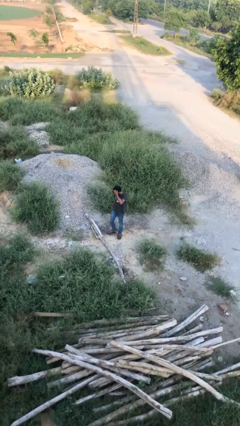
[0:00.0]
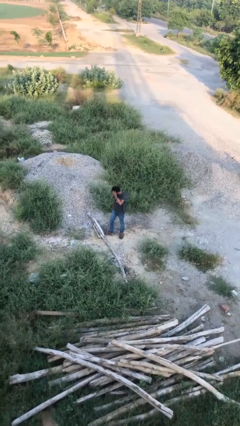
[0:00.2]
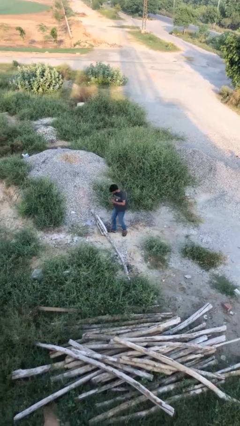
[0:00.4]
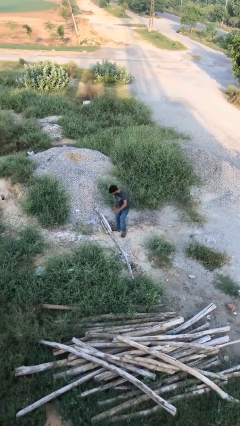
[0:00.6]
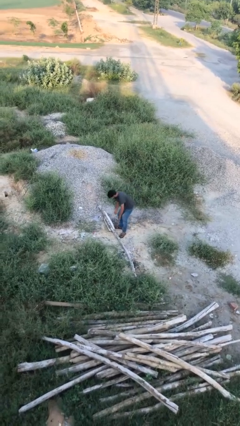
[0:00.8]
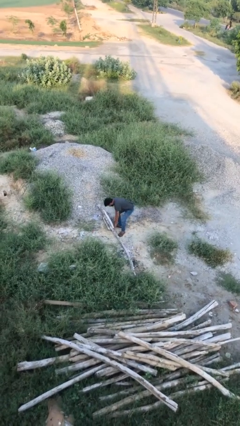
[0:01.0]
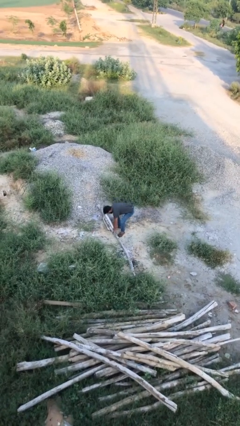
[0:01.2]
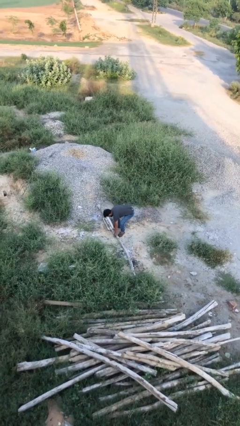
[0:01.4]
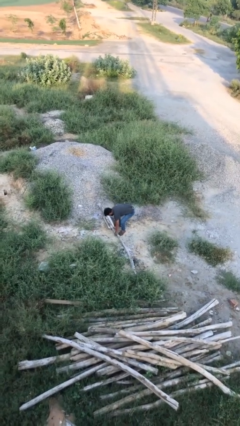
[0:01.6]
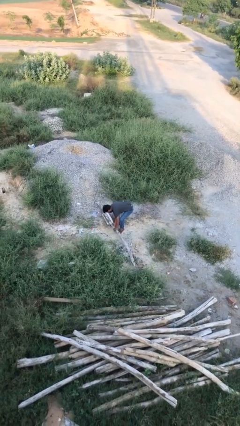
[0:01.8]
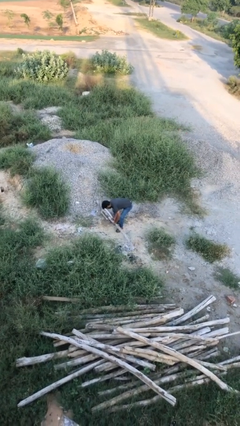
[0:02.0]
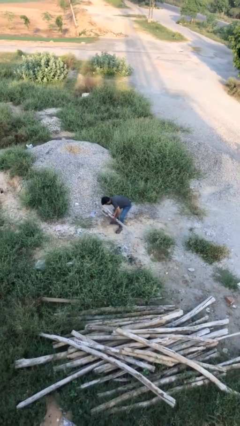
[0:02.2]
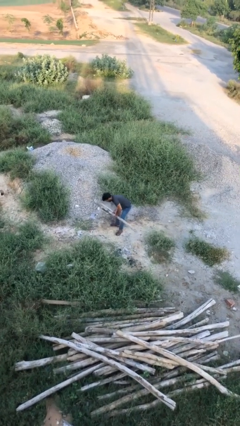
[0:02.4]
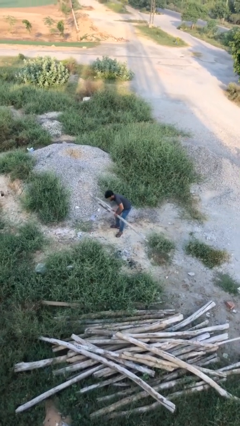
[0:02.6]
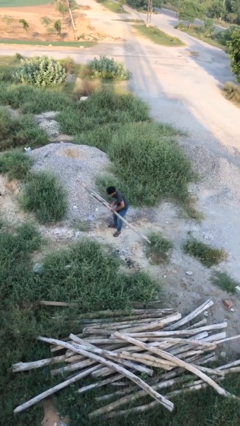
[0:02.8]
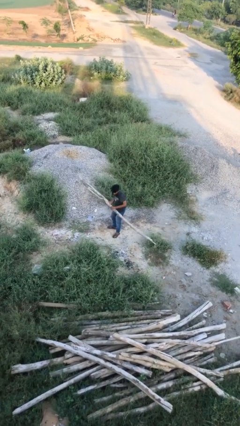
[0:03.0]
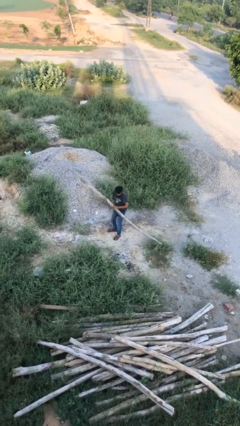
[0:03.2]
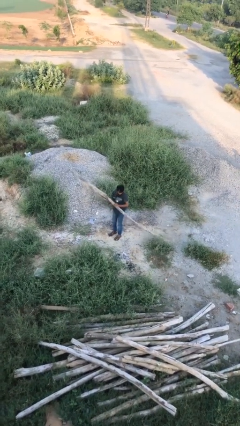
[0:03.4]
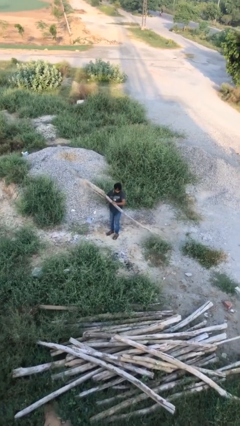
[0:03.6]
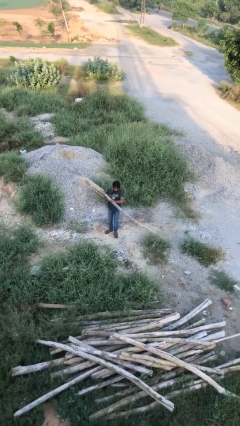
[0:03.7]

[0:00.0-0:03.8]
person picks up object from floor

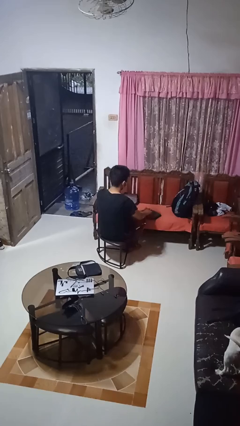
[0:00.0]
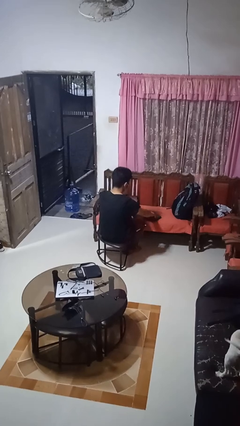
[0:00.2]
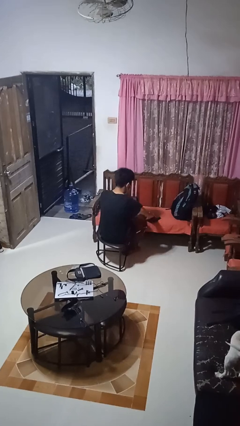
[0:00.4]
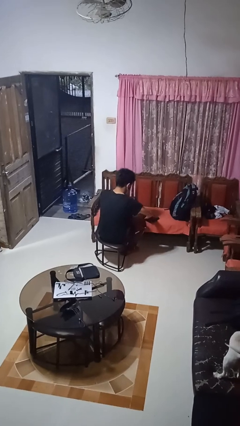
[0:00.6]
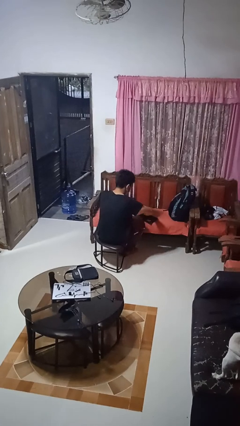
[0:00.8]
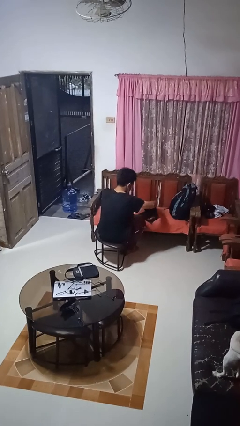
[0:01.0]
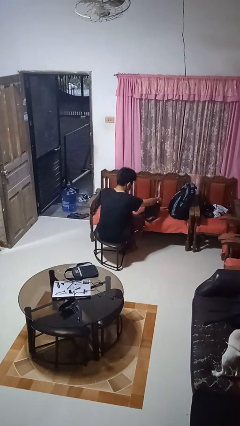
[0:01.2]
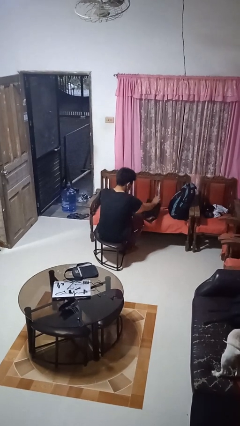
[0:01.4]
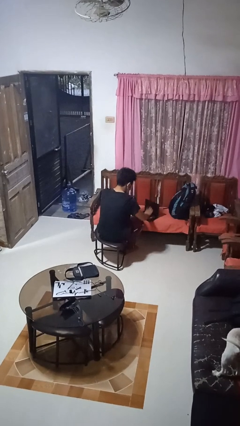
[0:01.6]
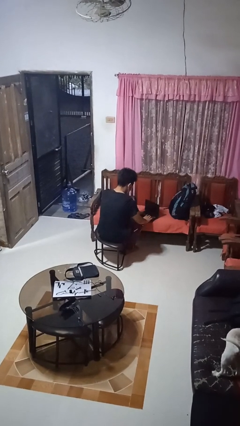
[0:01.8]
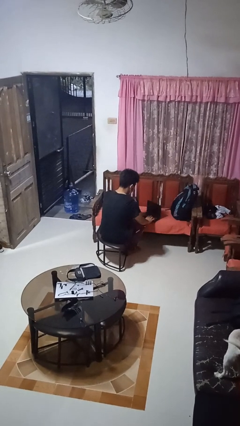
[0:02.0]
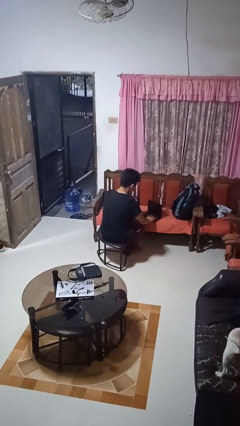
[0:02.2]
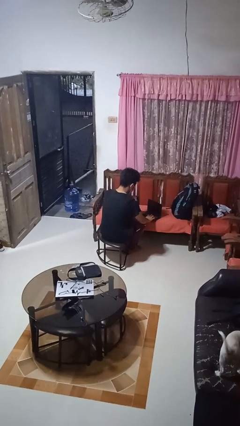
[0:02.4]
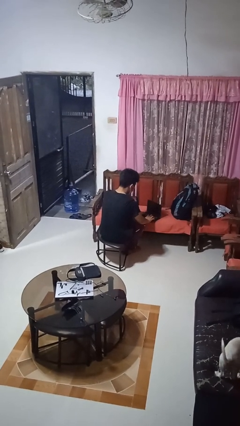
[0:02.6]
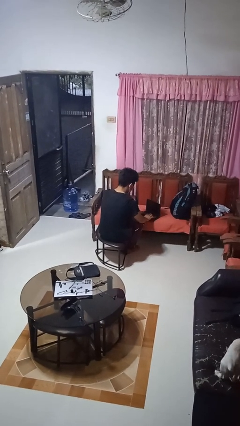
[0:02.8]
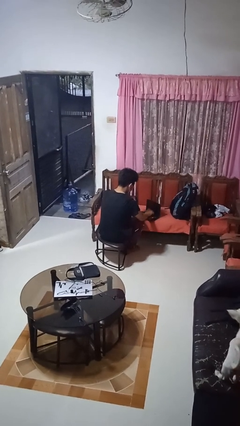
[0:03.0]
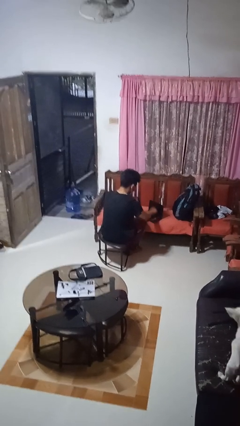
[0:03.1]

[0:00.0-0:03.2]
person opens laptop

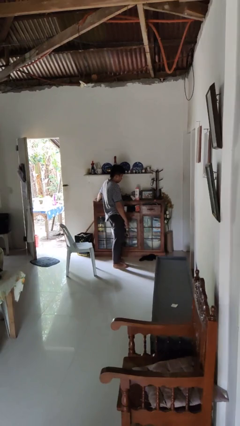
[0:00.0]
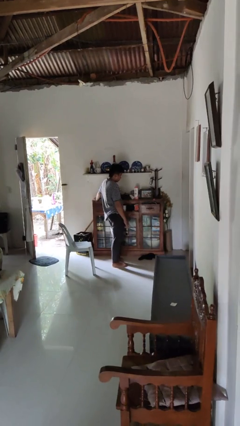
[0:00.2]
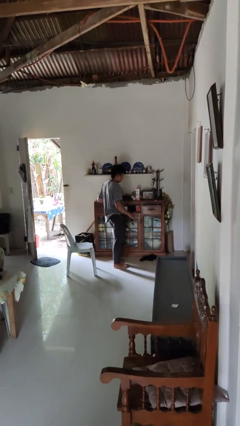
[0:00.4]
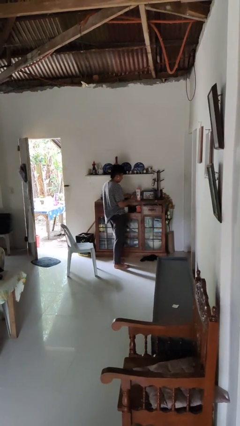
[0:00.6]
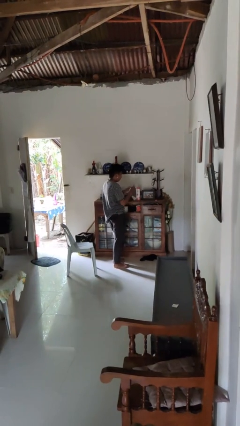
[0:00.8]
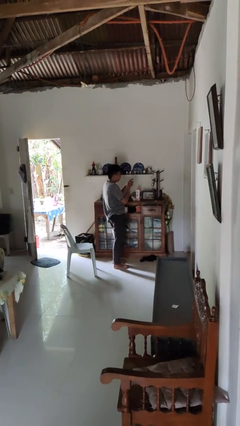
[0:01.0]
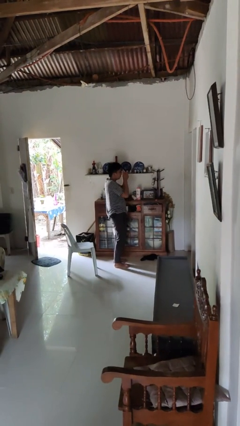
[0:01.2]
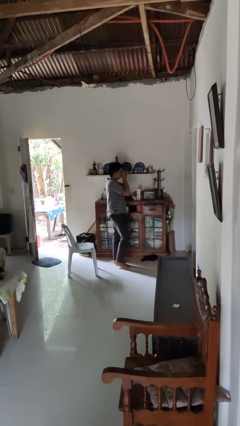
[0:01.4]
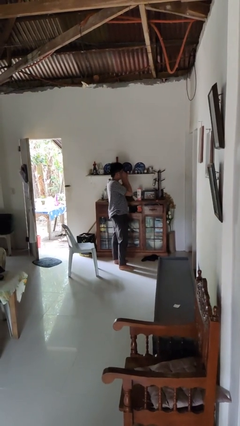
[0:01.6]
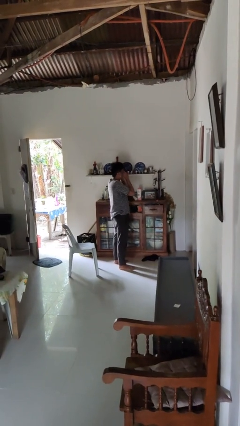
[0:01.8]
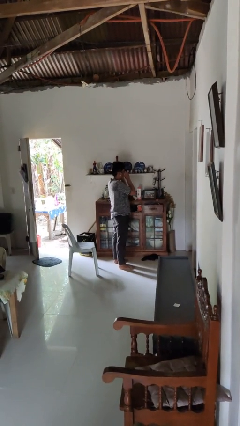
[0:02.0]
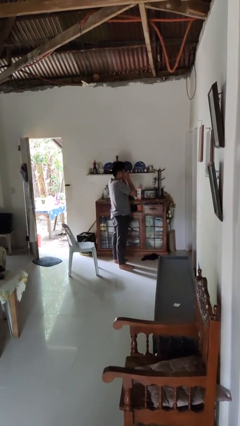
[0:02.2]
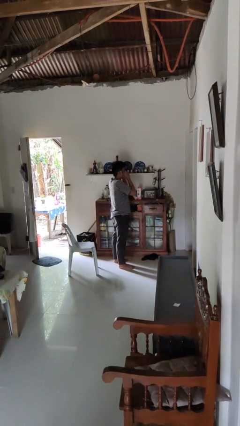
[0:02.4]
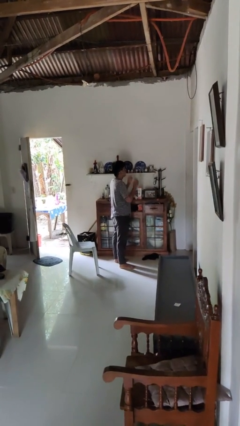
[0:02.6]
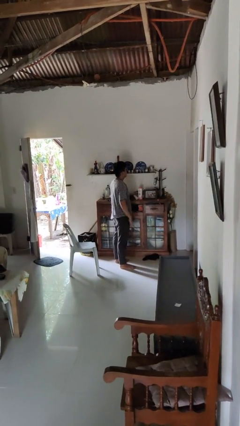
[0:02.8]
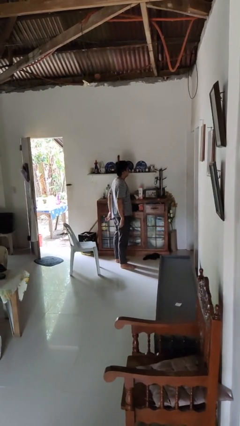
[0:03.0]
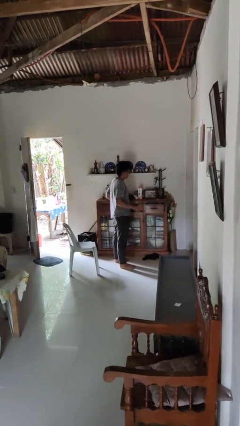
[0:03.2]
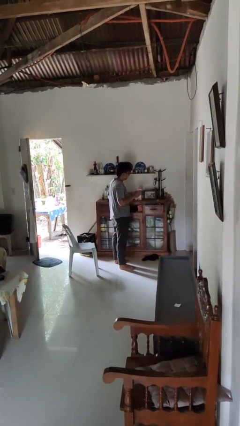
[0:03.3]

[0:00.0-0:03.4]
person puts on sunglasses

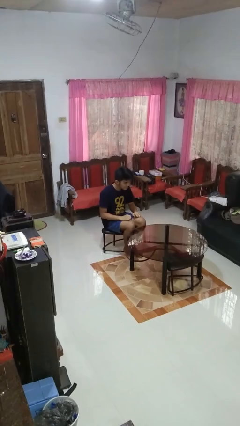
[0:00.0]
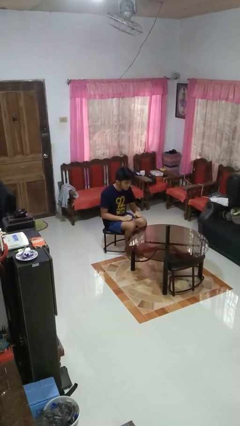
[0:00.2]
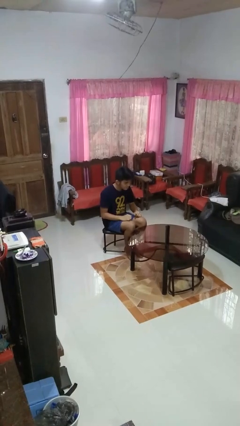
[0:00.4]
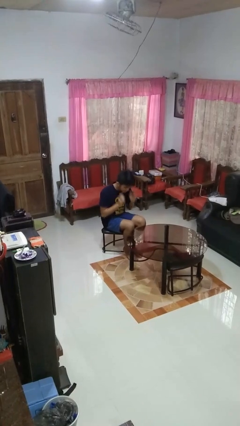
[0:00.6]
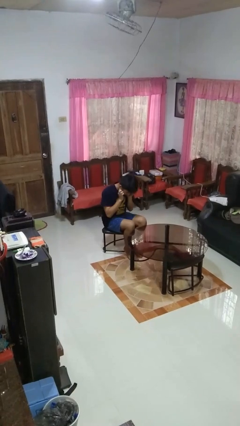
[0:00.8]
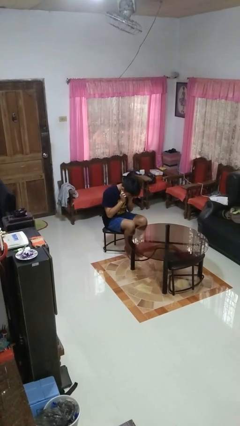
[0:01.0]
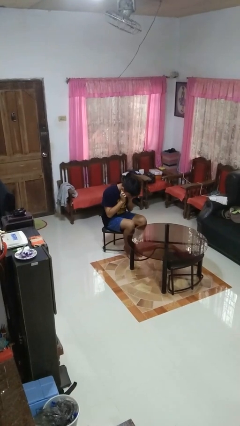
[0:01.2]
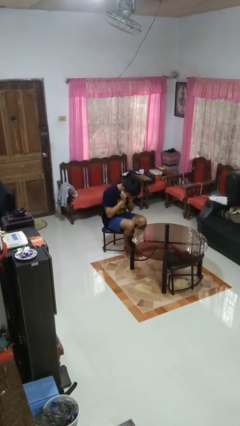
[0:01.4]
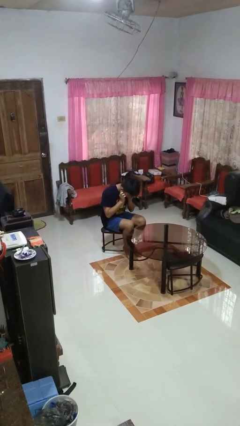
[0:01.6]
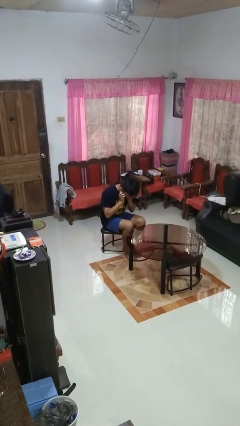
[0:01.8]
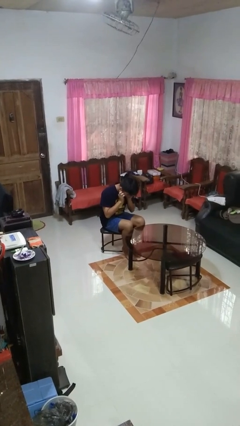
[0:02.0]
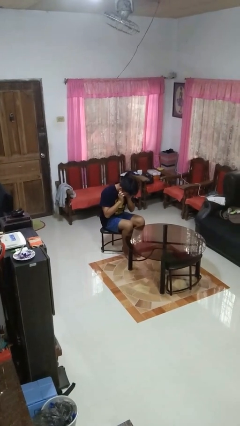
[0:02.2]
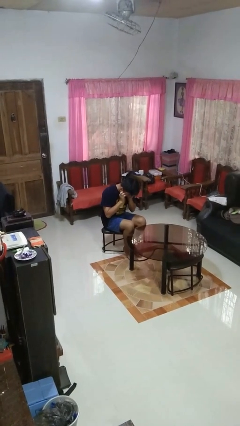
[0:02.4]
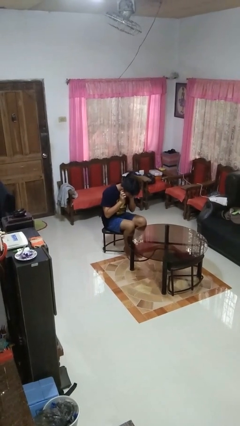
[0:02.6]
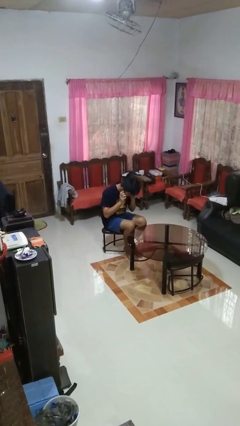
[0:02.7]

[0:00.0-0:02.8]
person puts fingers in ear

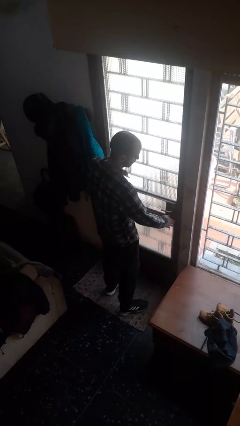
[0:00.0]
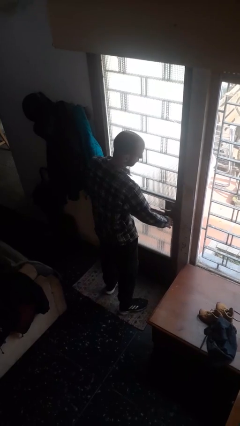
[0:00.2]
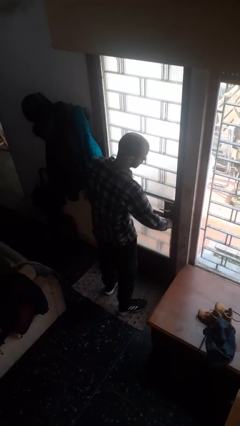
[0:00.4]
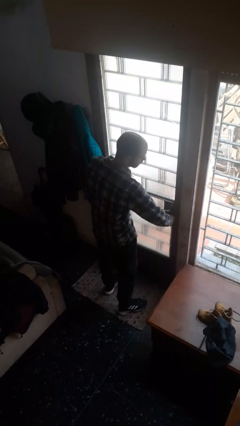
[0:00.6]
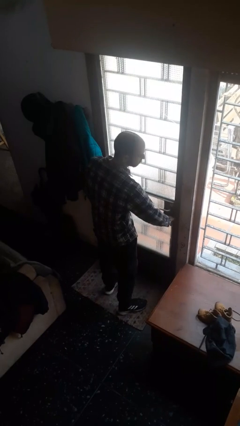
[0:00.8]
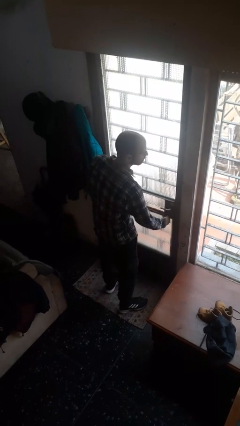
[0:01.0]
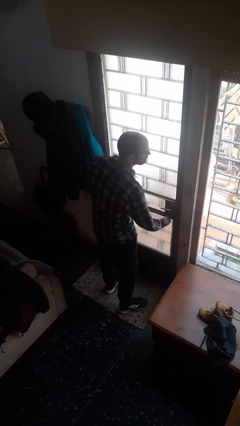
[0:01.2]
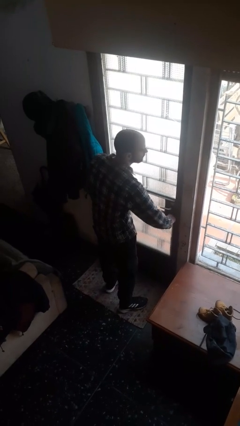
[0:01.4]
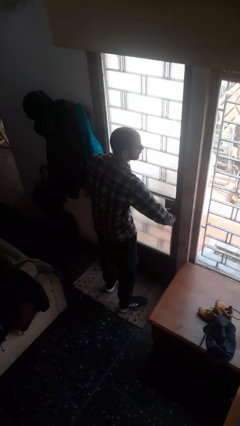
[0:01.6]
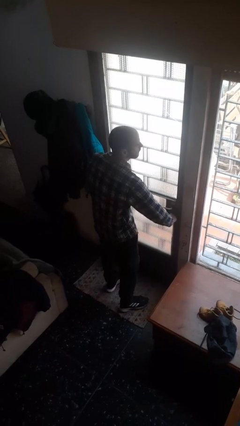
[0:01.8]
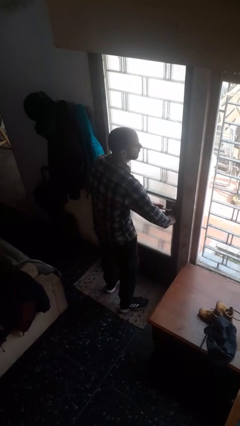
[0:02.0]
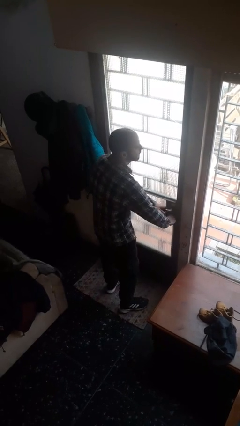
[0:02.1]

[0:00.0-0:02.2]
person unlocks door with keys

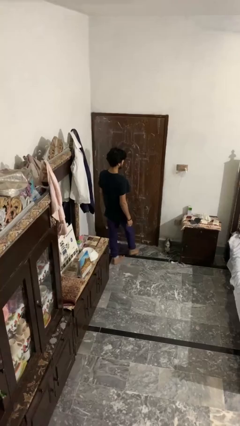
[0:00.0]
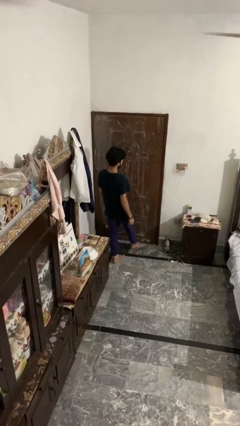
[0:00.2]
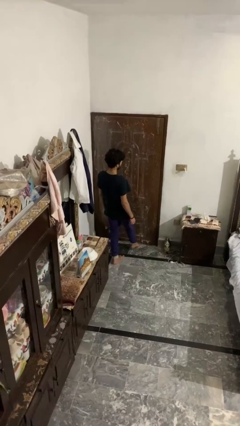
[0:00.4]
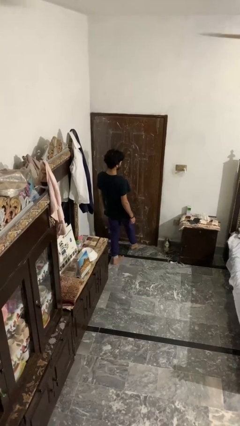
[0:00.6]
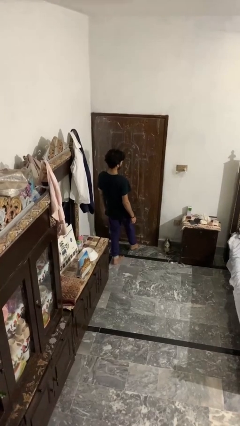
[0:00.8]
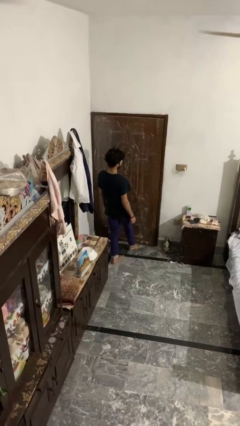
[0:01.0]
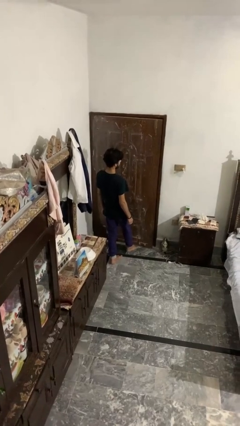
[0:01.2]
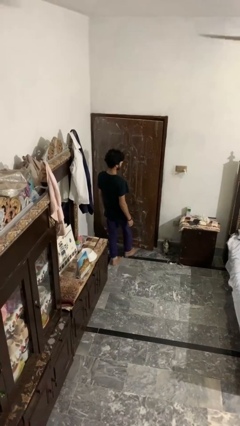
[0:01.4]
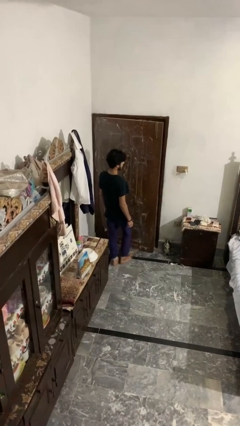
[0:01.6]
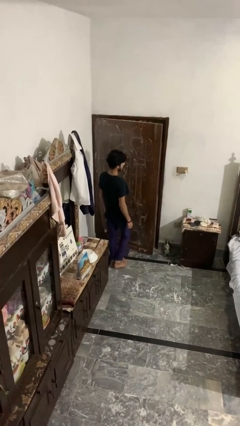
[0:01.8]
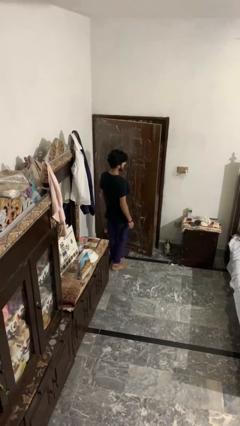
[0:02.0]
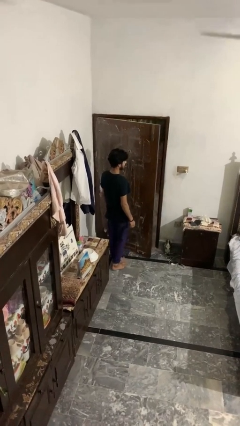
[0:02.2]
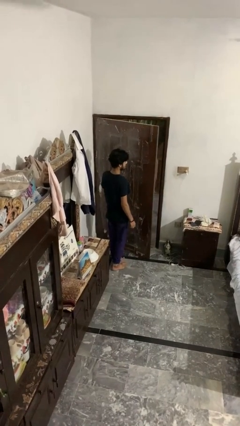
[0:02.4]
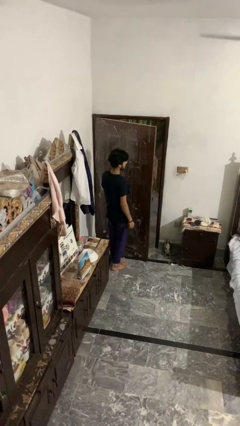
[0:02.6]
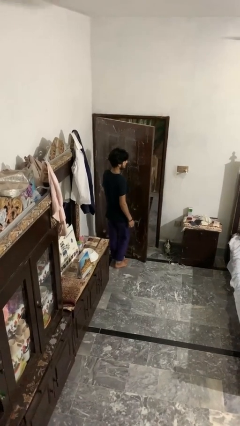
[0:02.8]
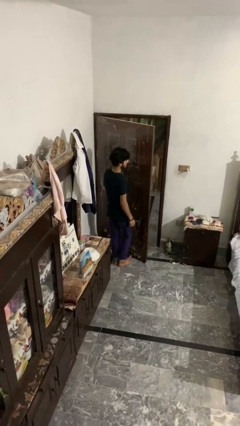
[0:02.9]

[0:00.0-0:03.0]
person opens facility door
